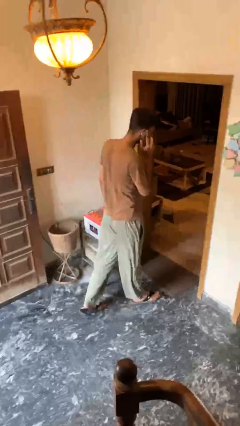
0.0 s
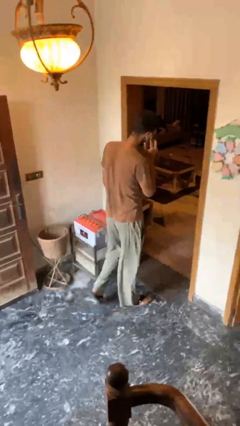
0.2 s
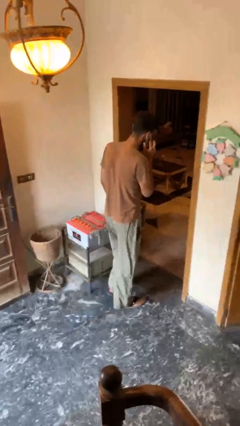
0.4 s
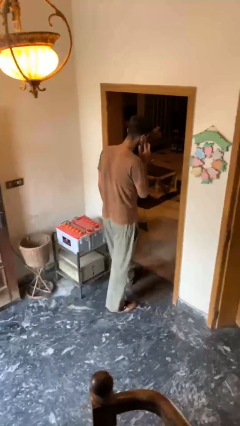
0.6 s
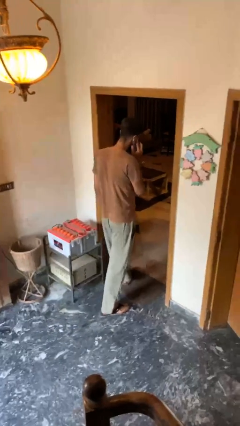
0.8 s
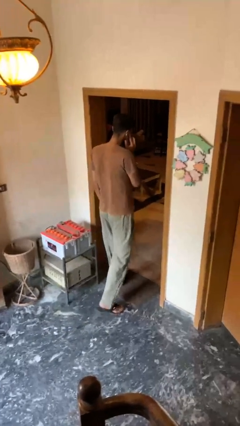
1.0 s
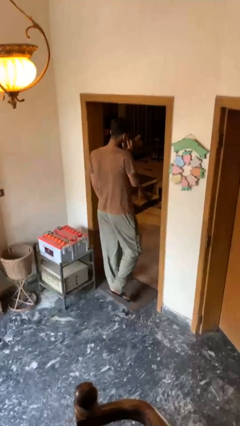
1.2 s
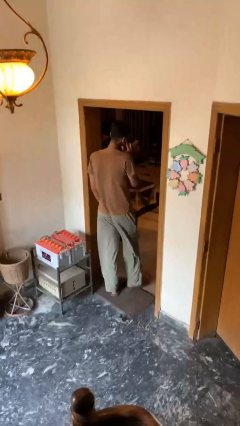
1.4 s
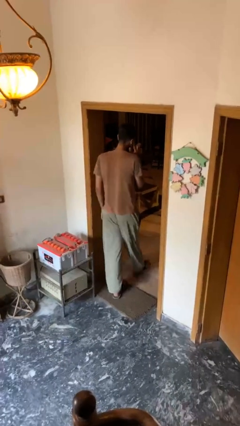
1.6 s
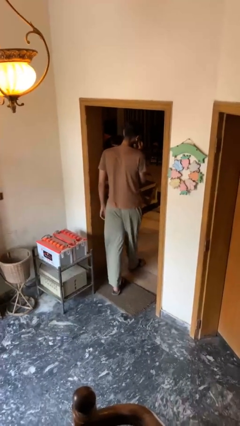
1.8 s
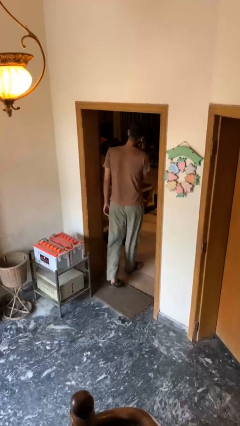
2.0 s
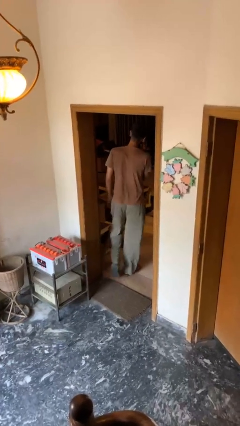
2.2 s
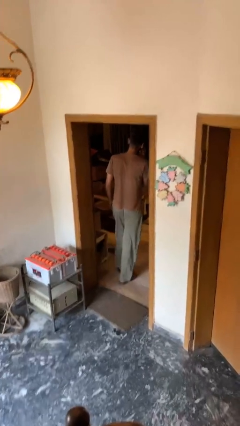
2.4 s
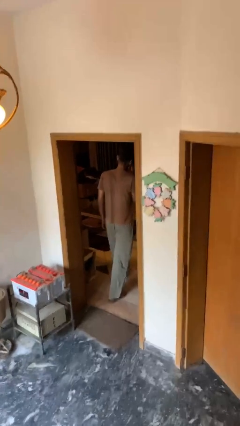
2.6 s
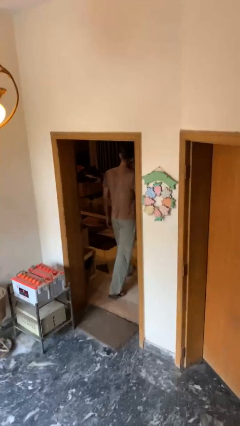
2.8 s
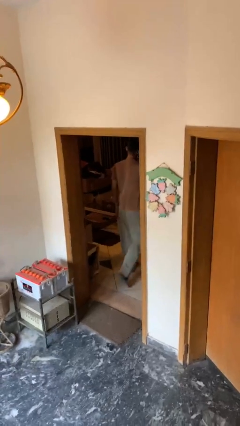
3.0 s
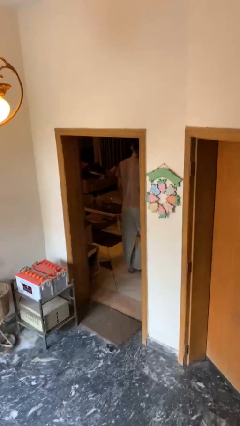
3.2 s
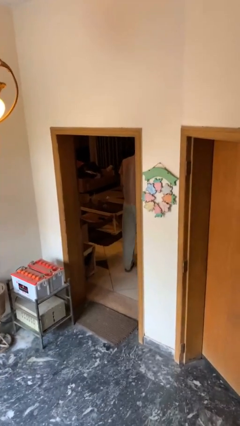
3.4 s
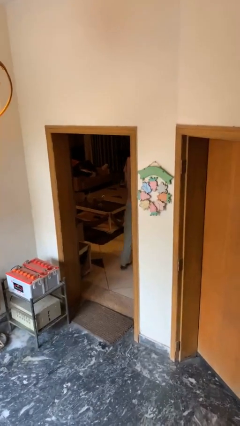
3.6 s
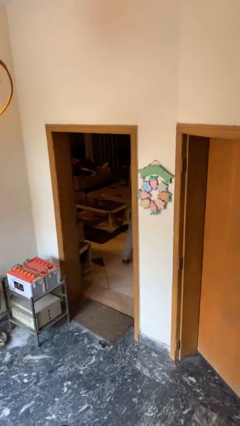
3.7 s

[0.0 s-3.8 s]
person exits scene through structure

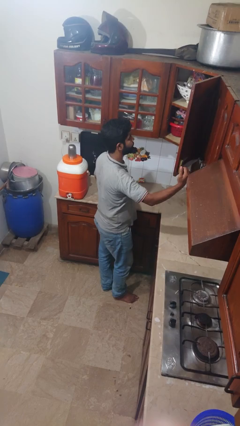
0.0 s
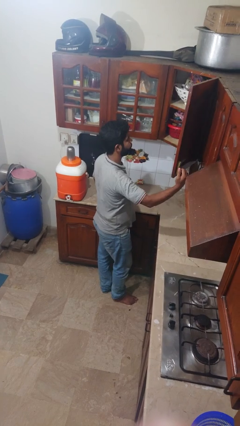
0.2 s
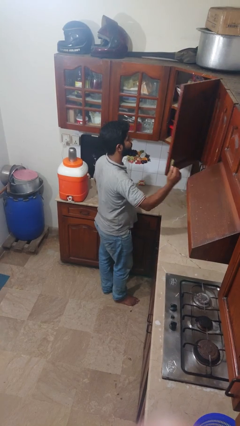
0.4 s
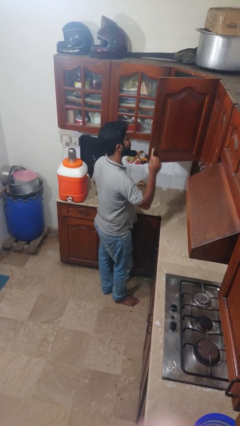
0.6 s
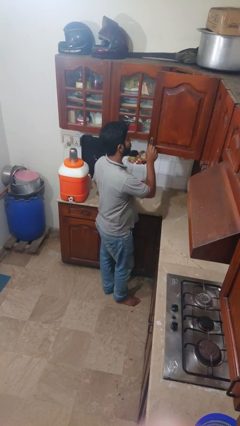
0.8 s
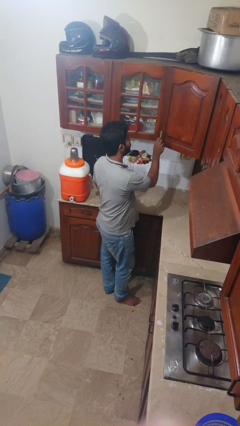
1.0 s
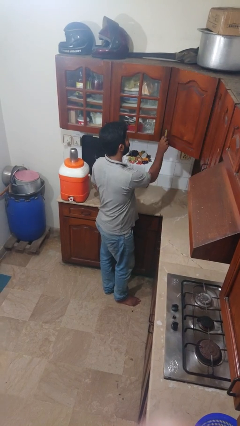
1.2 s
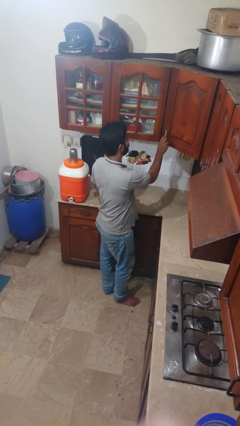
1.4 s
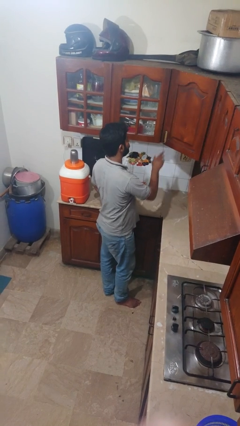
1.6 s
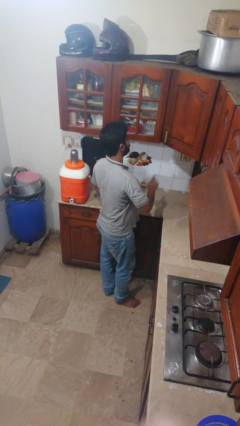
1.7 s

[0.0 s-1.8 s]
person closes cabinet

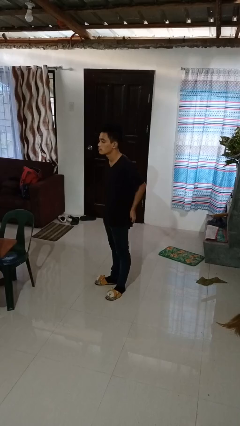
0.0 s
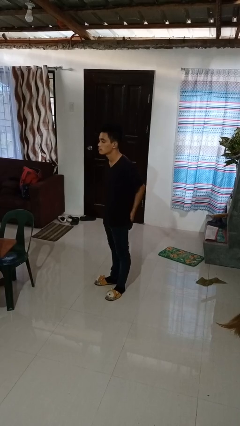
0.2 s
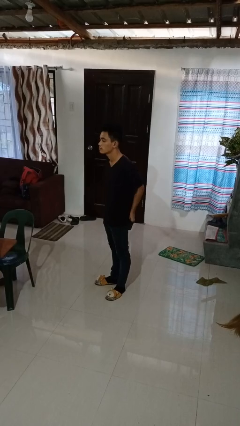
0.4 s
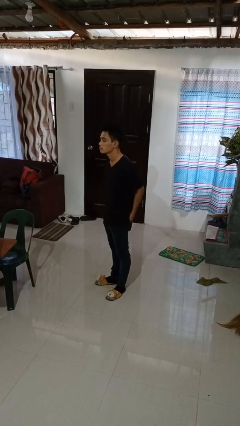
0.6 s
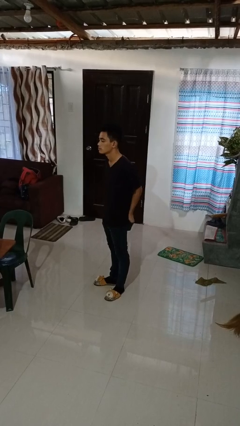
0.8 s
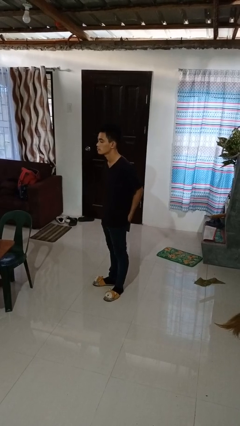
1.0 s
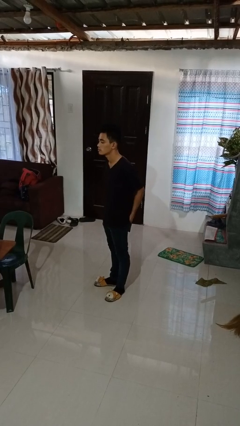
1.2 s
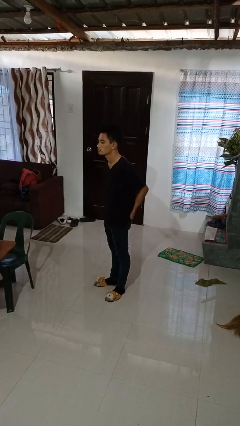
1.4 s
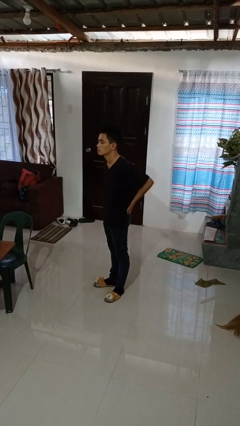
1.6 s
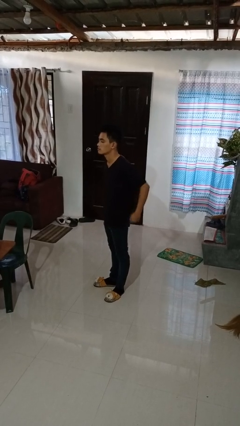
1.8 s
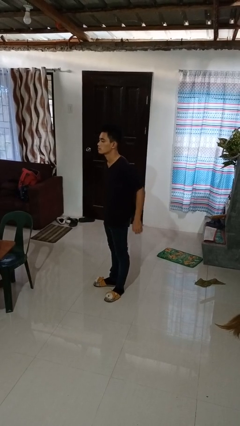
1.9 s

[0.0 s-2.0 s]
person puts hands in back pockets

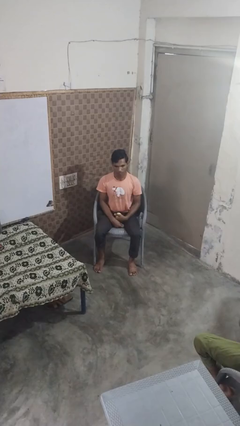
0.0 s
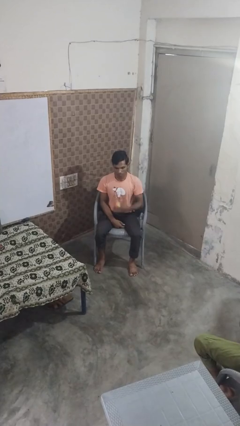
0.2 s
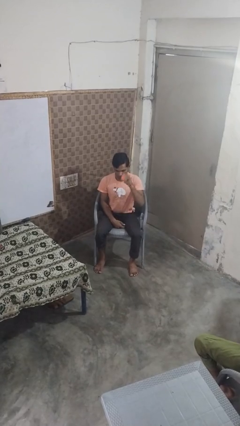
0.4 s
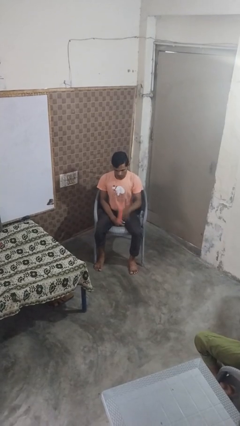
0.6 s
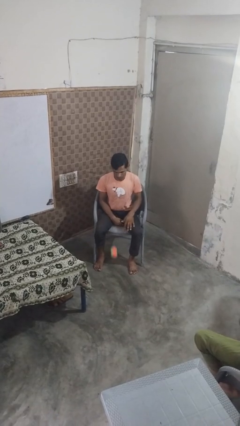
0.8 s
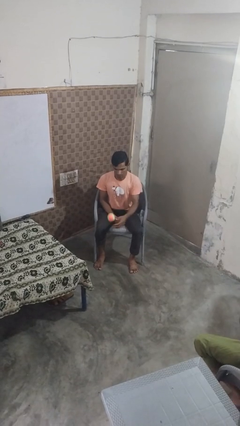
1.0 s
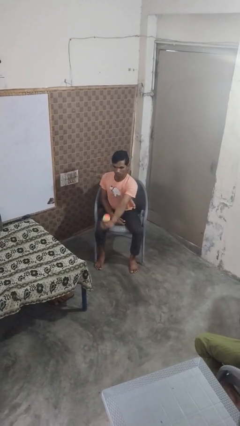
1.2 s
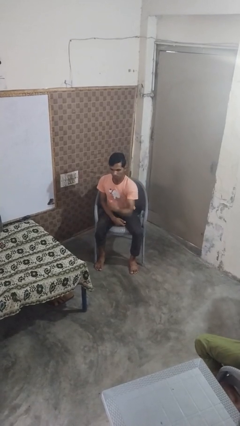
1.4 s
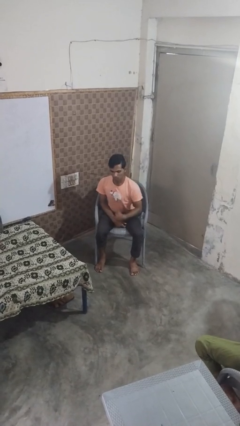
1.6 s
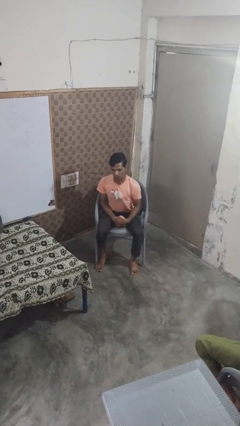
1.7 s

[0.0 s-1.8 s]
person bounces ball on floor

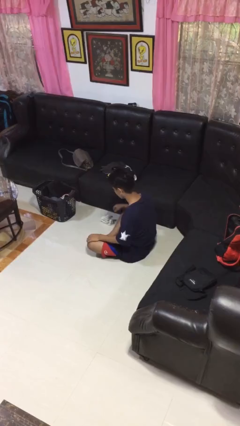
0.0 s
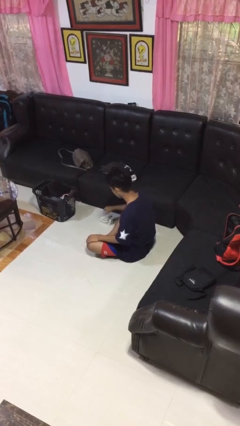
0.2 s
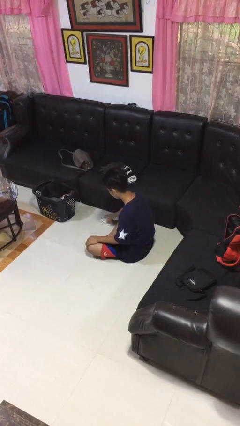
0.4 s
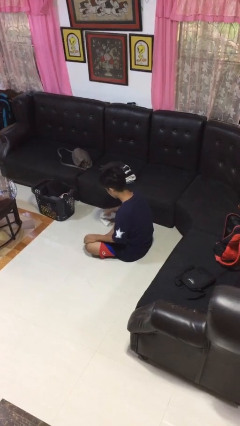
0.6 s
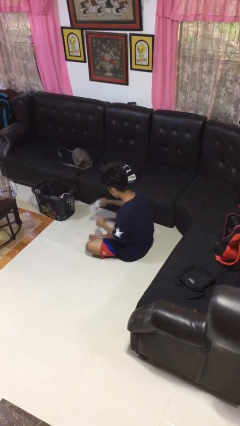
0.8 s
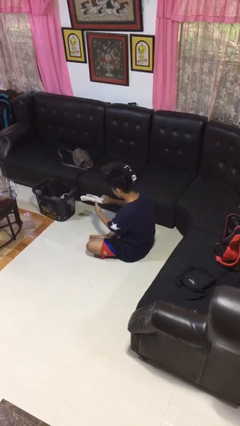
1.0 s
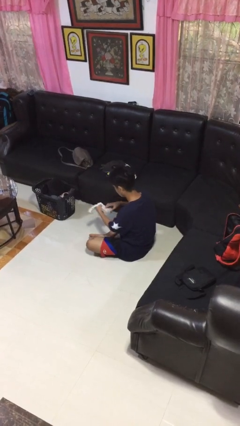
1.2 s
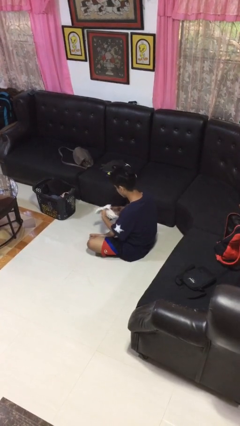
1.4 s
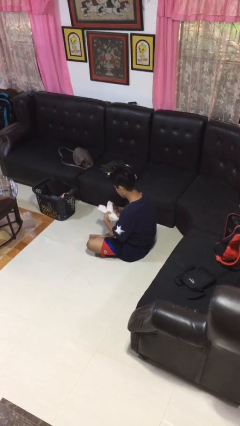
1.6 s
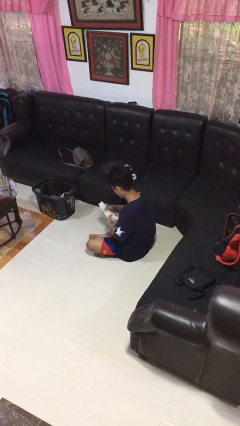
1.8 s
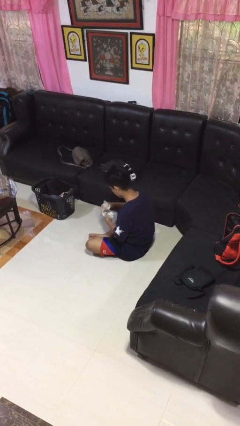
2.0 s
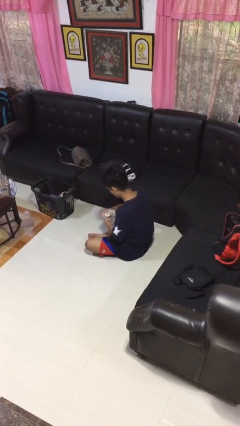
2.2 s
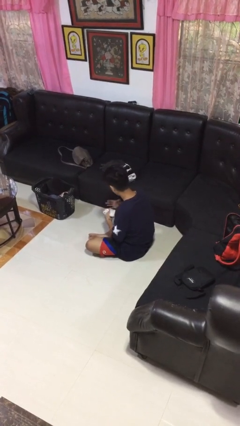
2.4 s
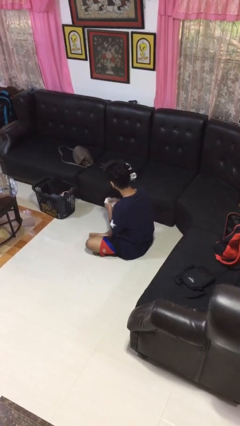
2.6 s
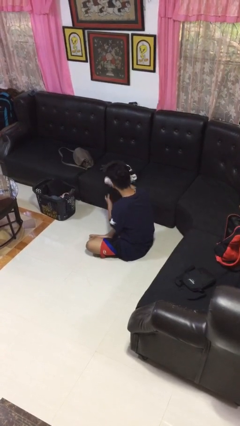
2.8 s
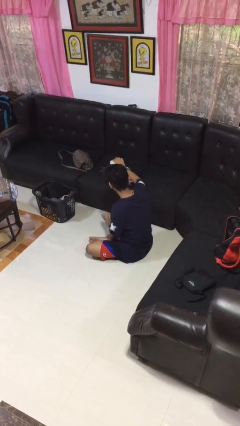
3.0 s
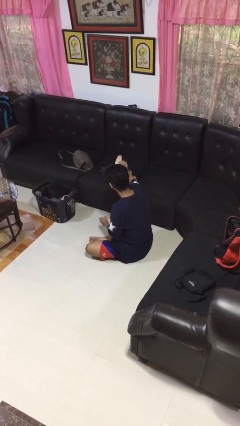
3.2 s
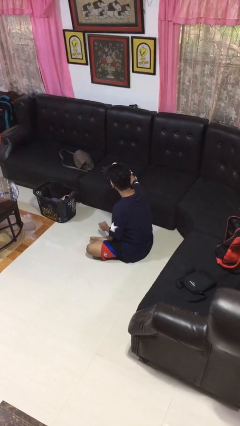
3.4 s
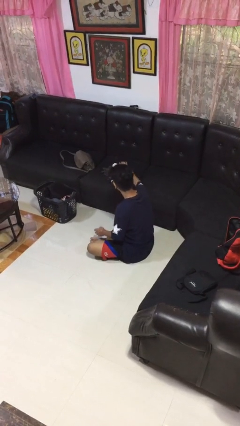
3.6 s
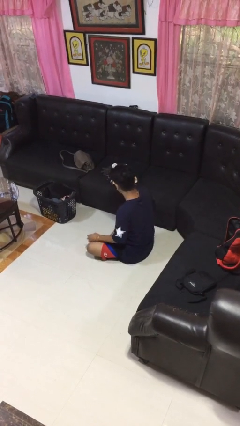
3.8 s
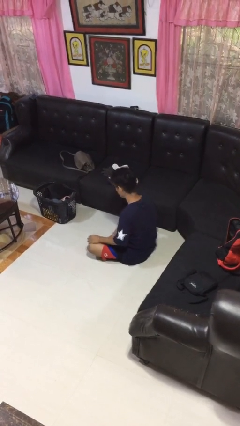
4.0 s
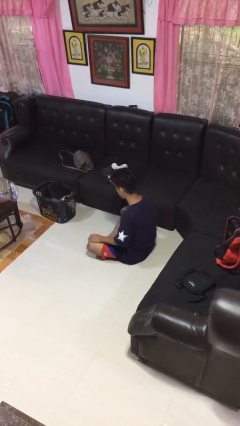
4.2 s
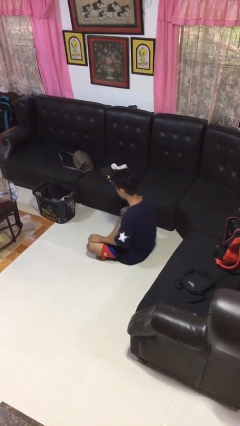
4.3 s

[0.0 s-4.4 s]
person folds socks

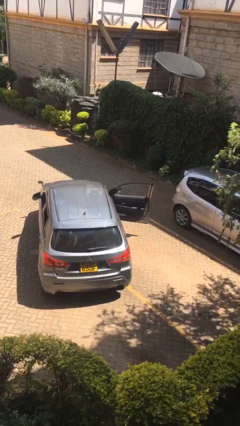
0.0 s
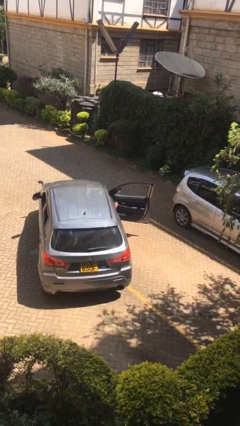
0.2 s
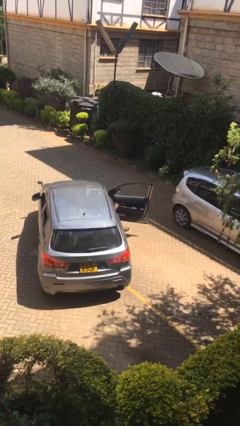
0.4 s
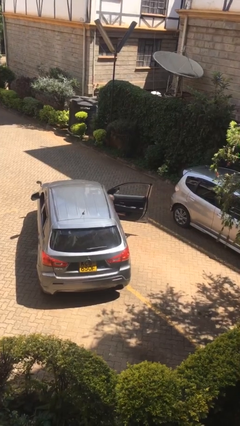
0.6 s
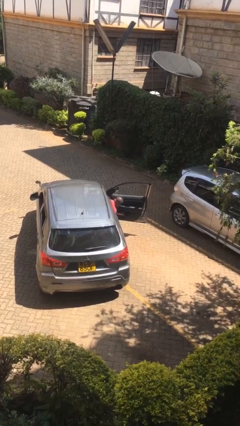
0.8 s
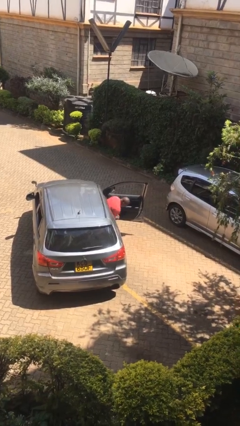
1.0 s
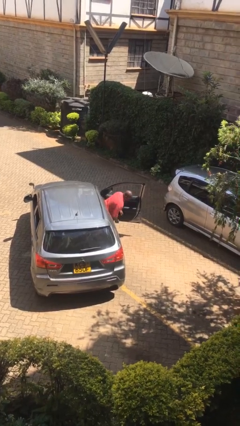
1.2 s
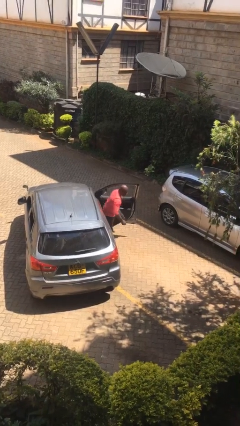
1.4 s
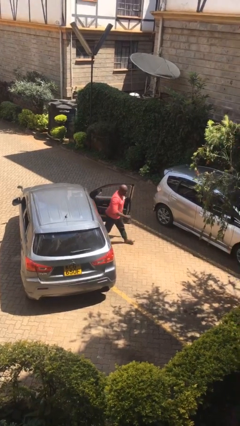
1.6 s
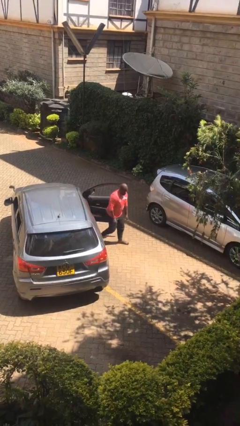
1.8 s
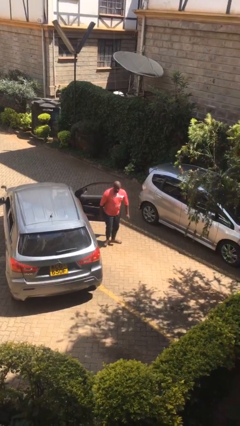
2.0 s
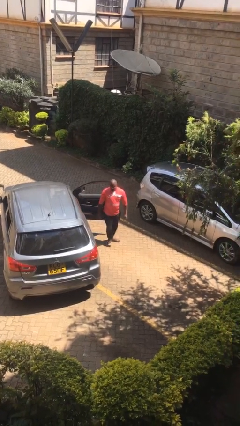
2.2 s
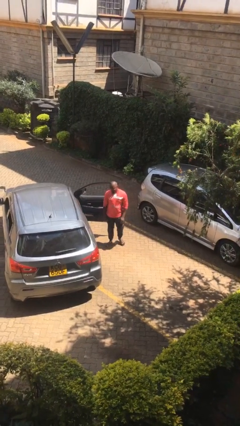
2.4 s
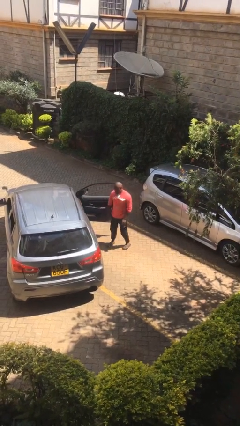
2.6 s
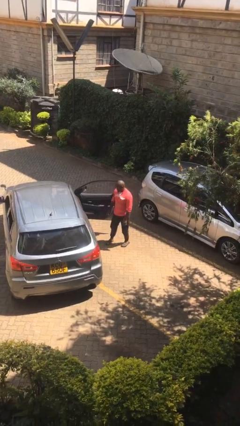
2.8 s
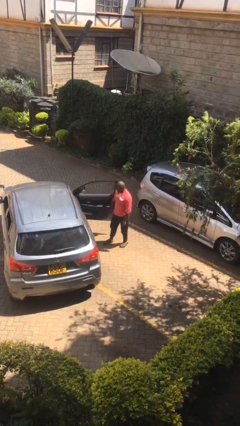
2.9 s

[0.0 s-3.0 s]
person exits car

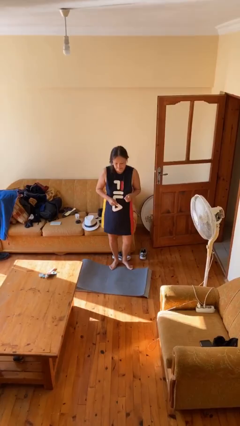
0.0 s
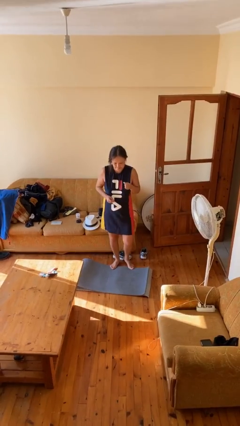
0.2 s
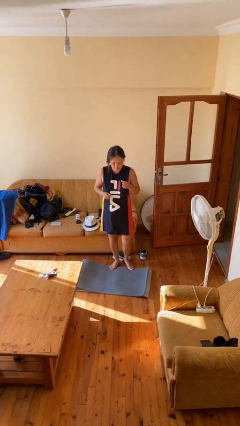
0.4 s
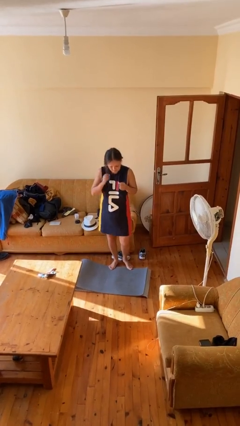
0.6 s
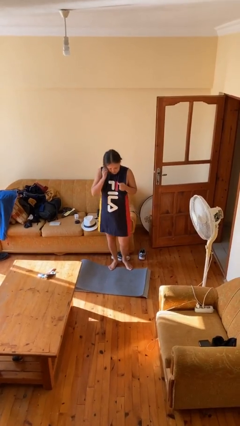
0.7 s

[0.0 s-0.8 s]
person karate chop

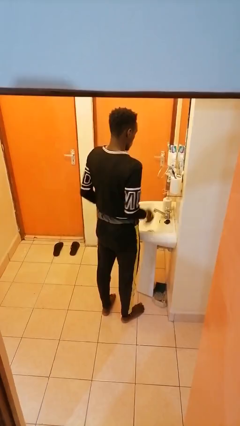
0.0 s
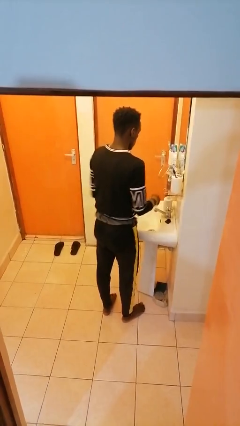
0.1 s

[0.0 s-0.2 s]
person washes hands
